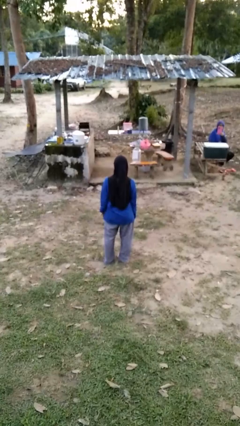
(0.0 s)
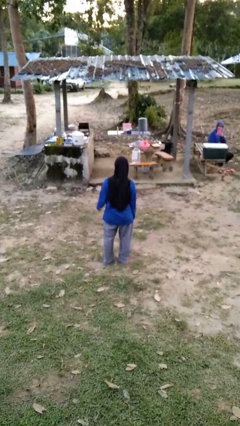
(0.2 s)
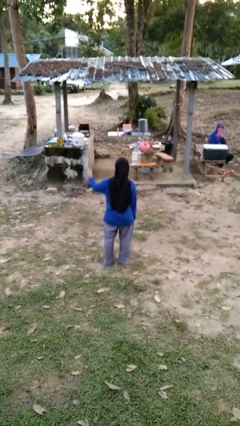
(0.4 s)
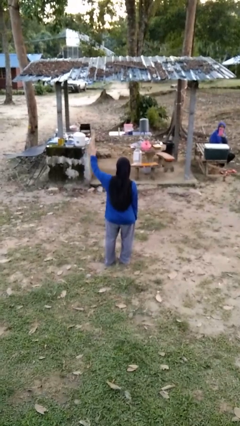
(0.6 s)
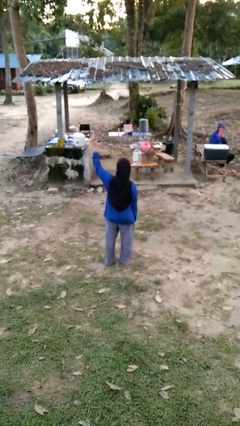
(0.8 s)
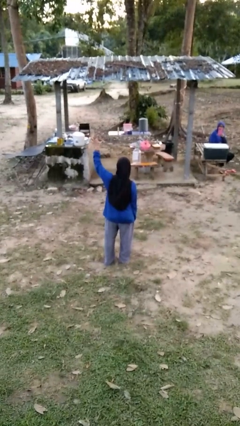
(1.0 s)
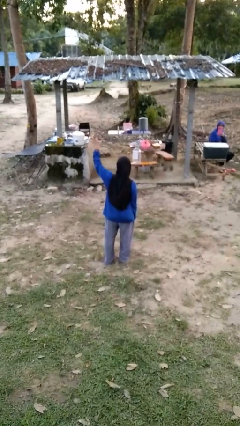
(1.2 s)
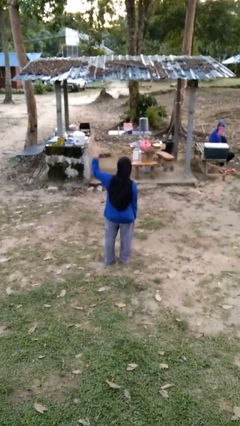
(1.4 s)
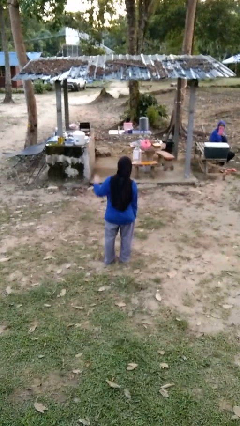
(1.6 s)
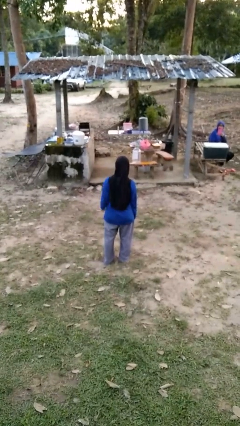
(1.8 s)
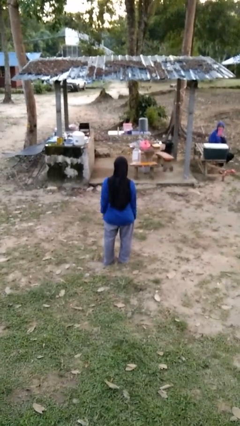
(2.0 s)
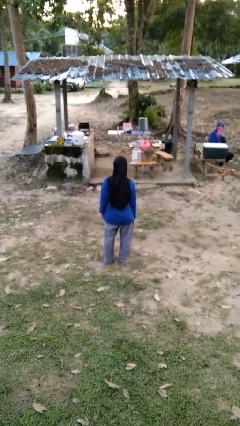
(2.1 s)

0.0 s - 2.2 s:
person gestures number five

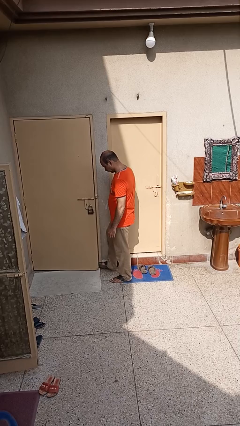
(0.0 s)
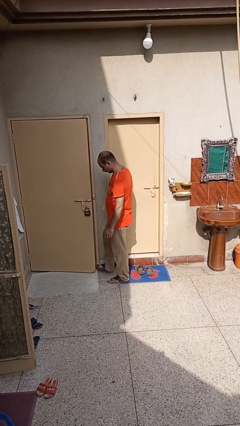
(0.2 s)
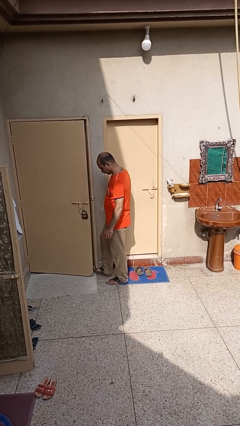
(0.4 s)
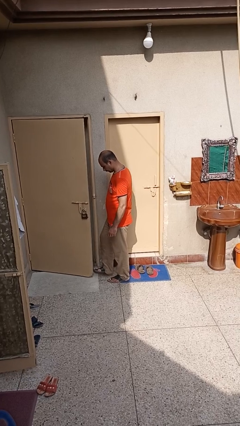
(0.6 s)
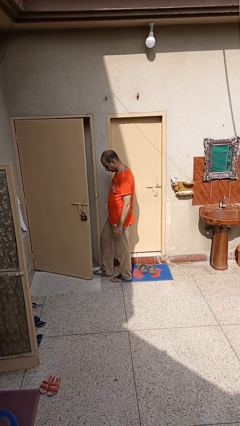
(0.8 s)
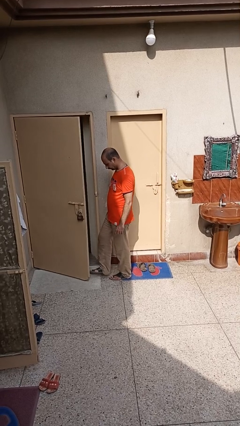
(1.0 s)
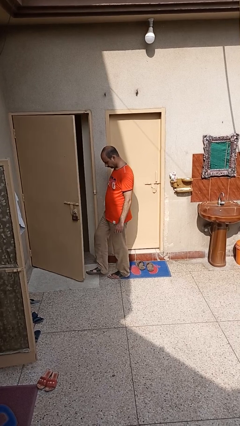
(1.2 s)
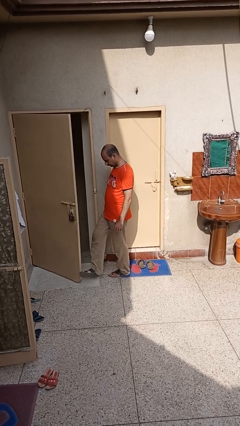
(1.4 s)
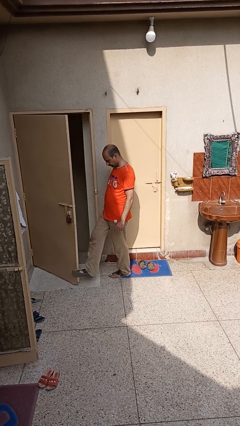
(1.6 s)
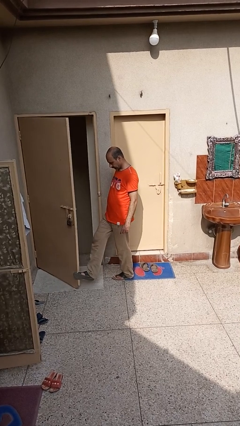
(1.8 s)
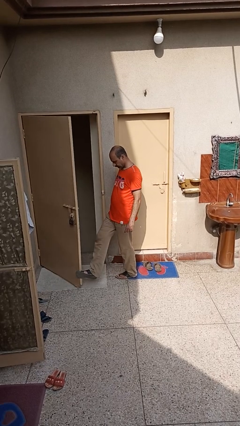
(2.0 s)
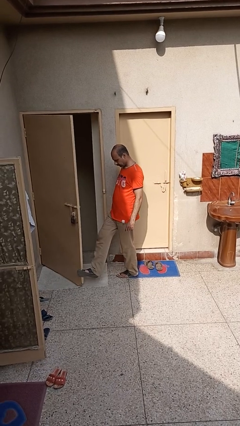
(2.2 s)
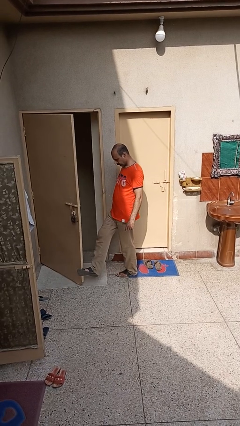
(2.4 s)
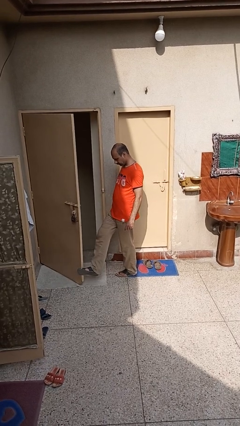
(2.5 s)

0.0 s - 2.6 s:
person opens facility door

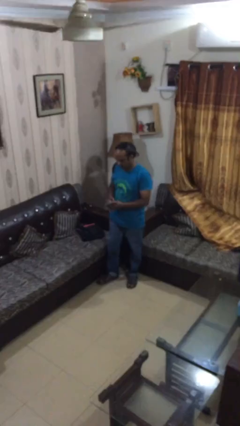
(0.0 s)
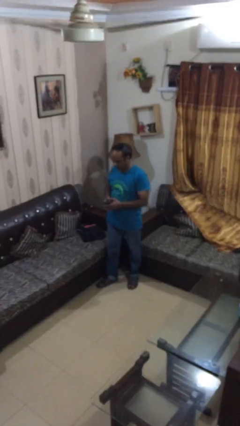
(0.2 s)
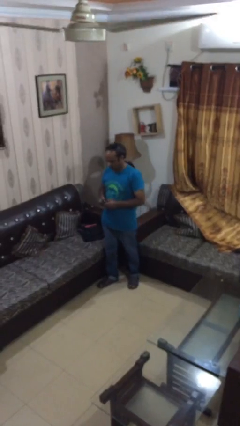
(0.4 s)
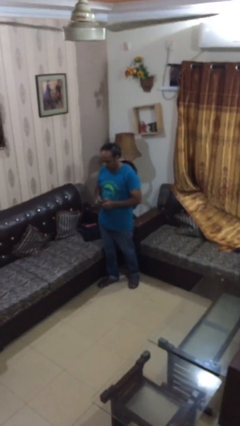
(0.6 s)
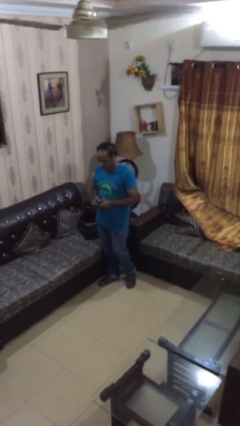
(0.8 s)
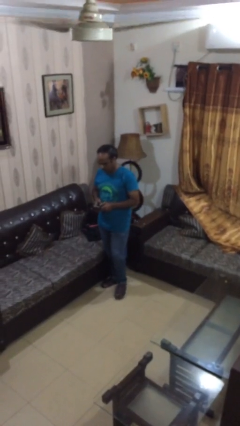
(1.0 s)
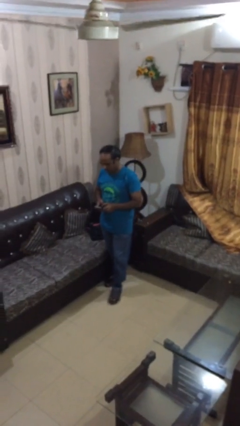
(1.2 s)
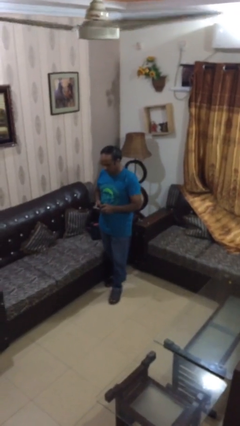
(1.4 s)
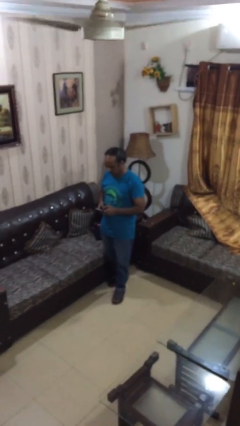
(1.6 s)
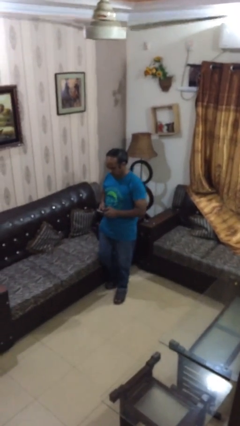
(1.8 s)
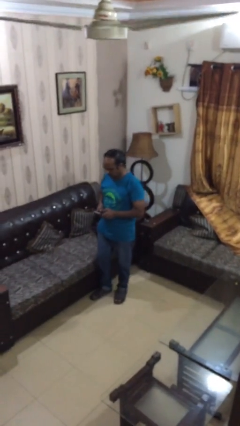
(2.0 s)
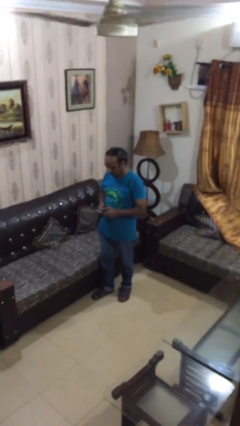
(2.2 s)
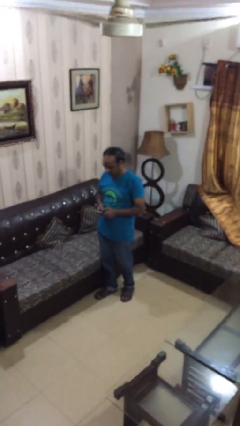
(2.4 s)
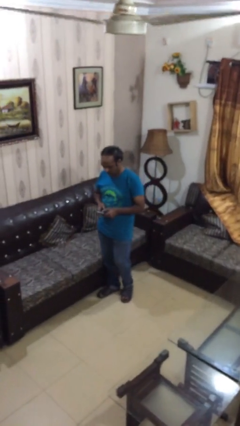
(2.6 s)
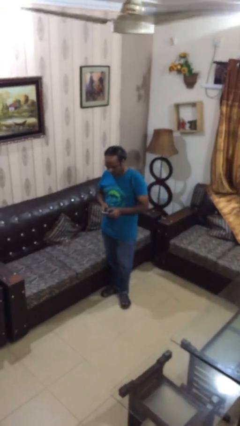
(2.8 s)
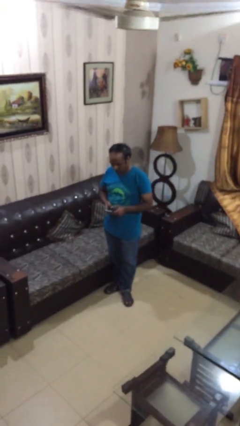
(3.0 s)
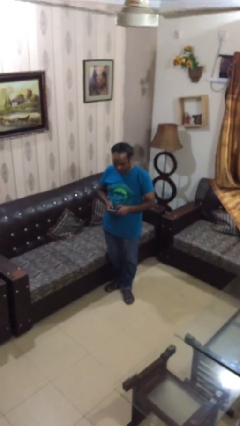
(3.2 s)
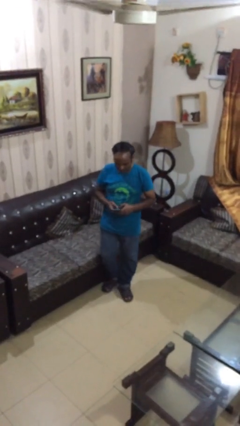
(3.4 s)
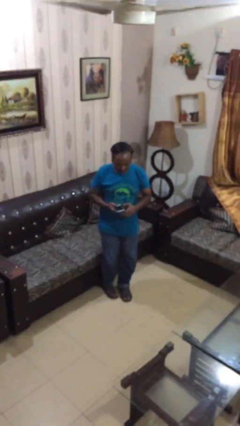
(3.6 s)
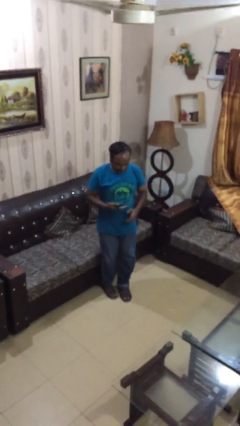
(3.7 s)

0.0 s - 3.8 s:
person texts on phone

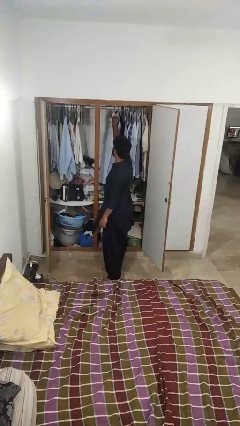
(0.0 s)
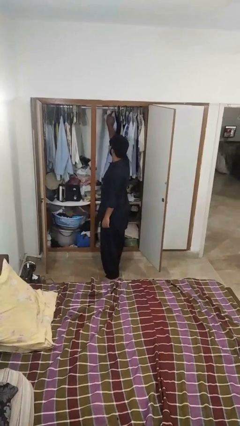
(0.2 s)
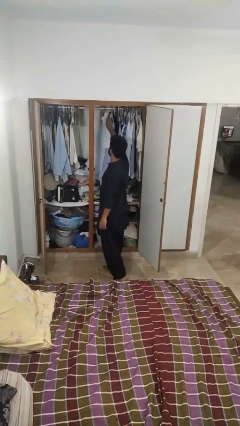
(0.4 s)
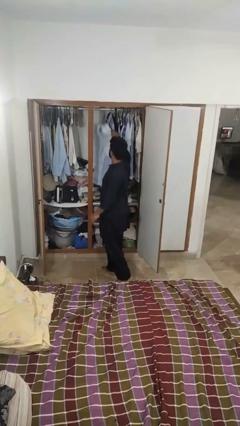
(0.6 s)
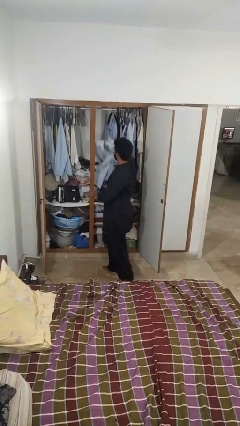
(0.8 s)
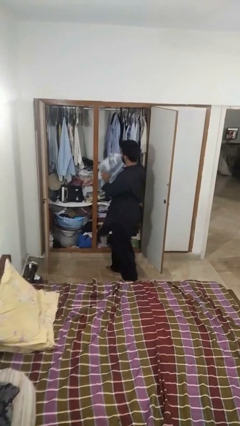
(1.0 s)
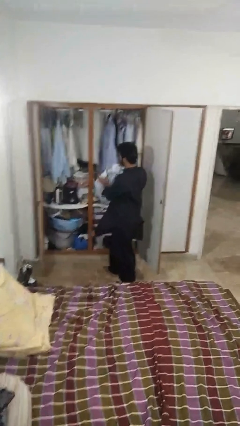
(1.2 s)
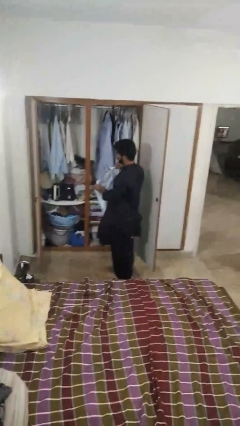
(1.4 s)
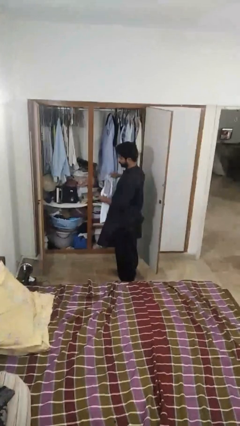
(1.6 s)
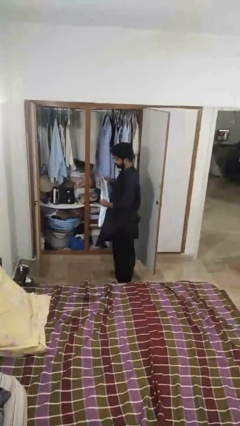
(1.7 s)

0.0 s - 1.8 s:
person takes clothes from dresser

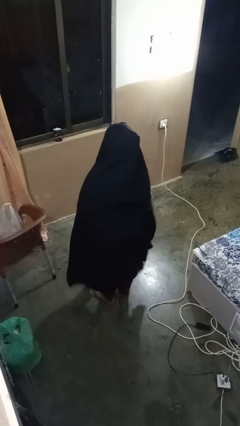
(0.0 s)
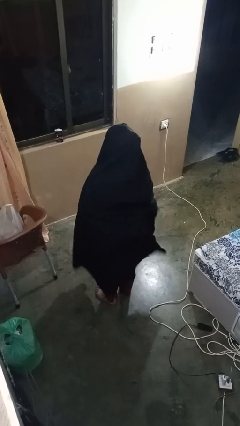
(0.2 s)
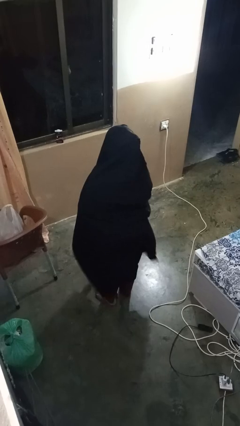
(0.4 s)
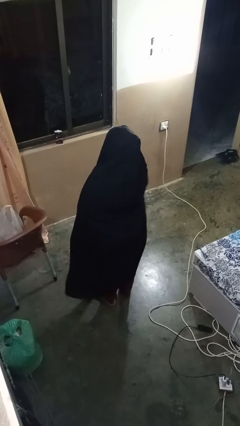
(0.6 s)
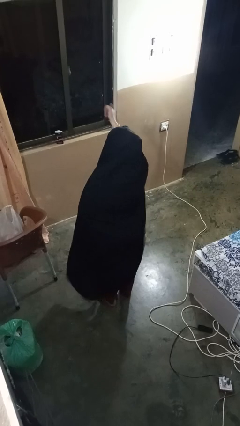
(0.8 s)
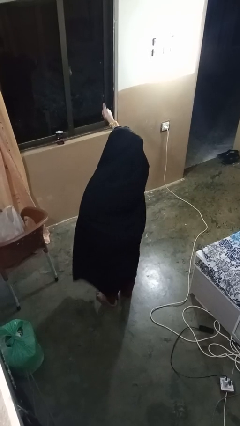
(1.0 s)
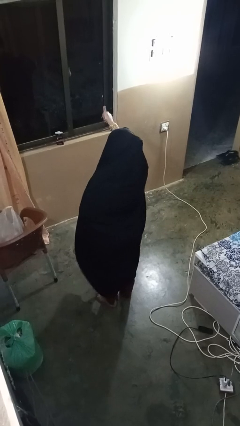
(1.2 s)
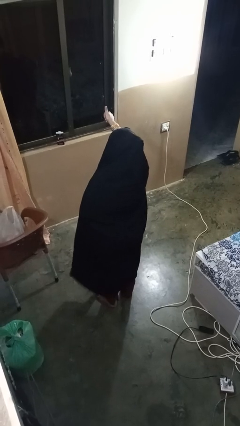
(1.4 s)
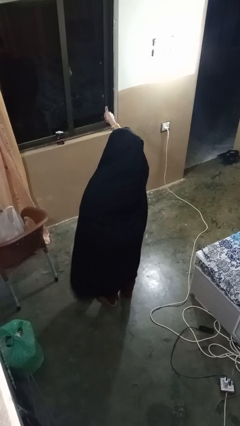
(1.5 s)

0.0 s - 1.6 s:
person gestures thumbs up

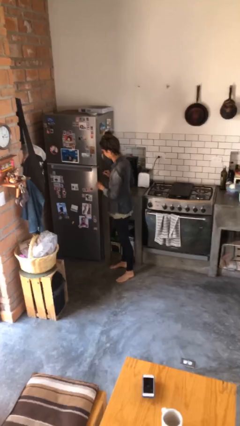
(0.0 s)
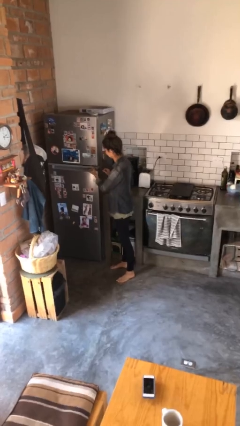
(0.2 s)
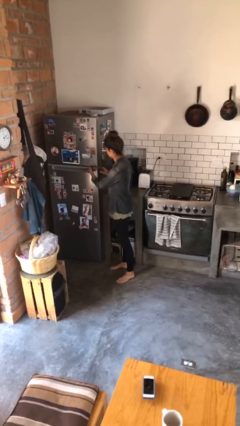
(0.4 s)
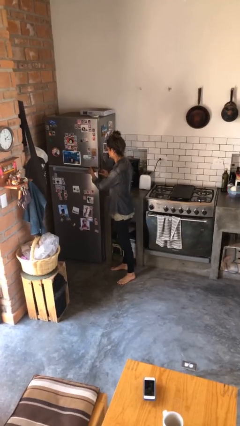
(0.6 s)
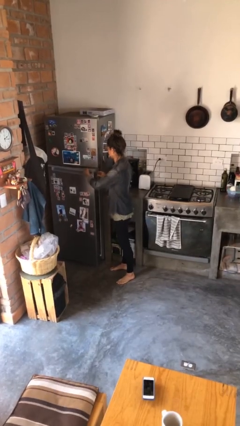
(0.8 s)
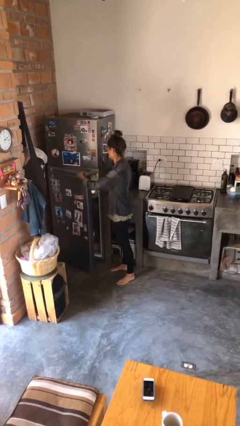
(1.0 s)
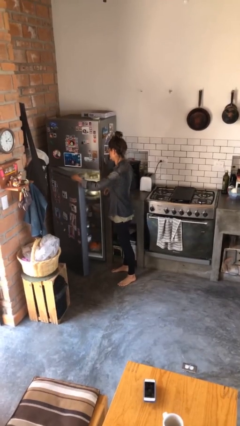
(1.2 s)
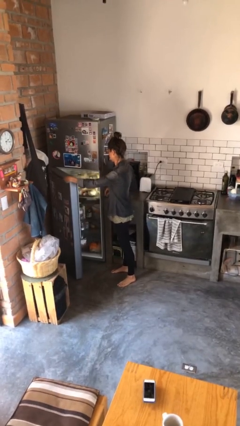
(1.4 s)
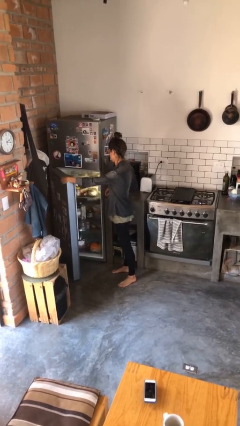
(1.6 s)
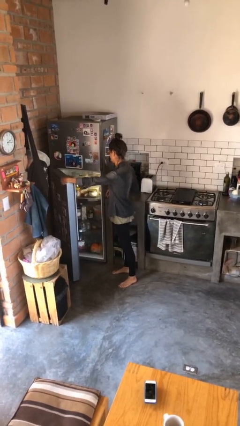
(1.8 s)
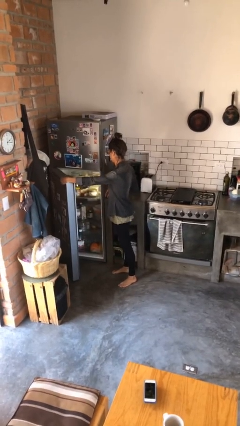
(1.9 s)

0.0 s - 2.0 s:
person opens refrigerator

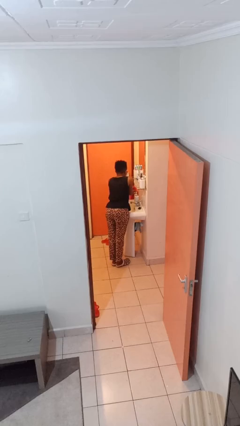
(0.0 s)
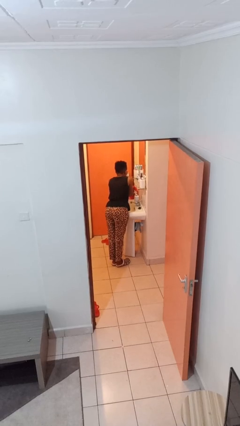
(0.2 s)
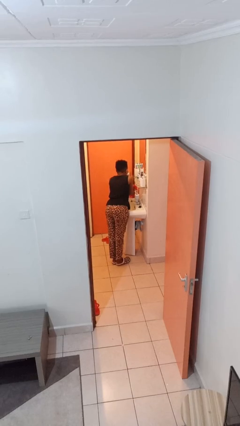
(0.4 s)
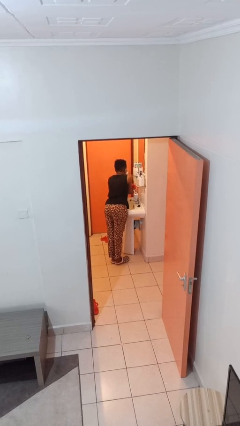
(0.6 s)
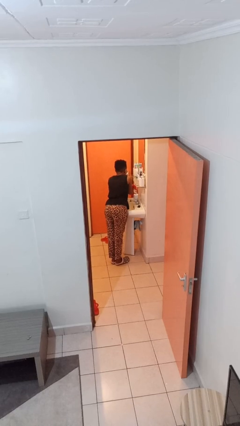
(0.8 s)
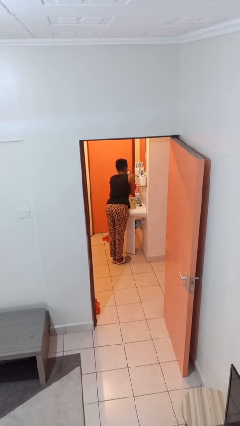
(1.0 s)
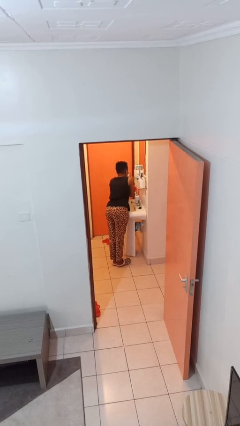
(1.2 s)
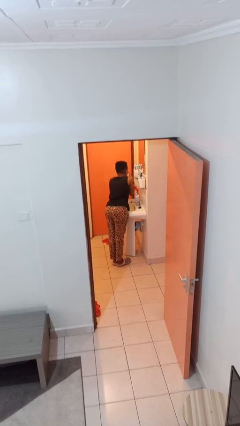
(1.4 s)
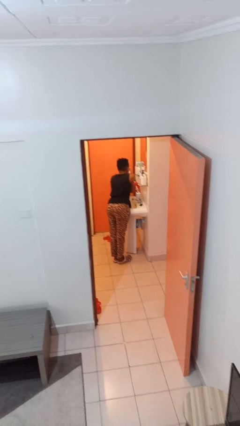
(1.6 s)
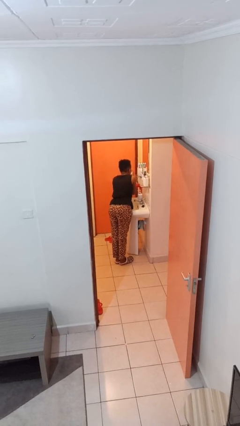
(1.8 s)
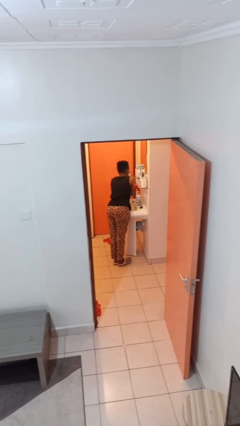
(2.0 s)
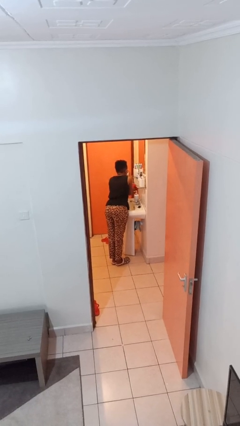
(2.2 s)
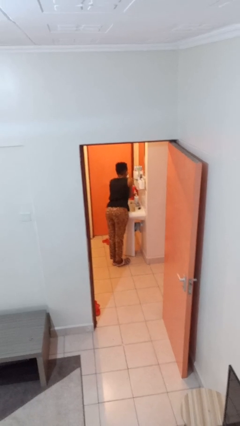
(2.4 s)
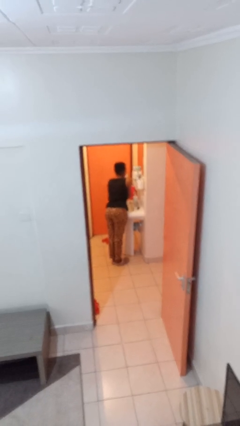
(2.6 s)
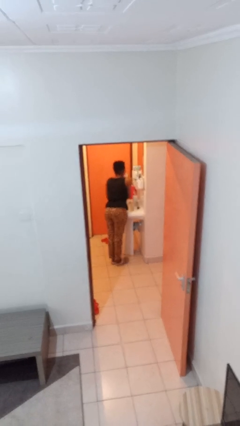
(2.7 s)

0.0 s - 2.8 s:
person dries hands with towel

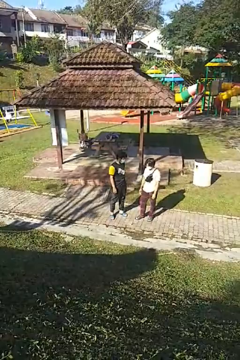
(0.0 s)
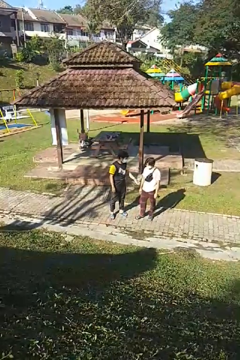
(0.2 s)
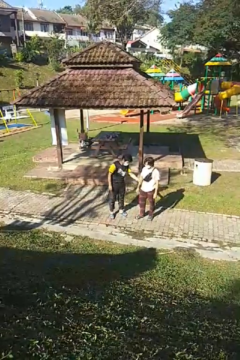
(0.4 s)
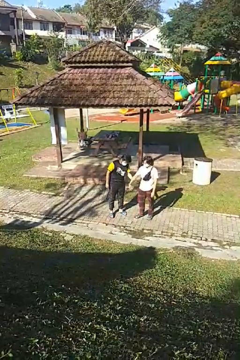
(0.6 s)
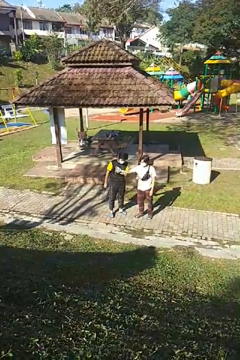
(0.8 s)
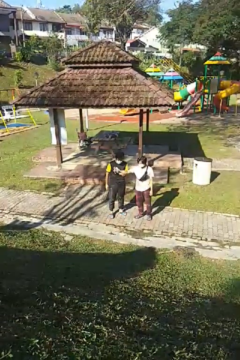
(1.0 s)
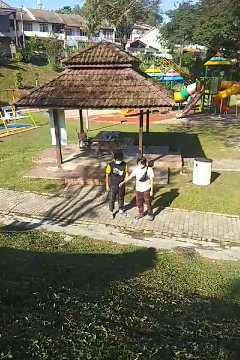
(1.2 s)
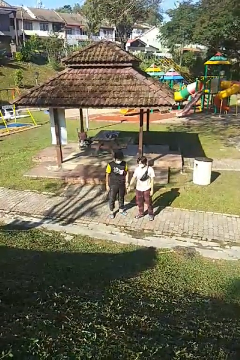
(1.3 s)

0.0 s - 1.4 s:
person grabs person by forearm
